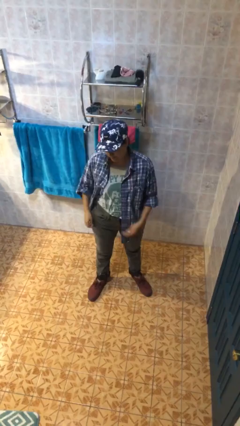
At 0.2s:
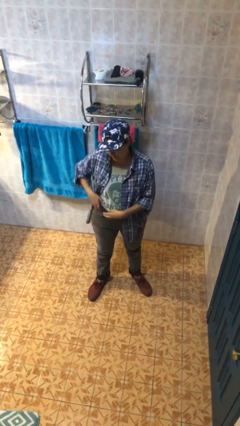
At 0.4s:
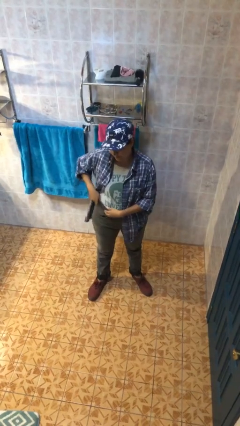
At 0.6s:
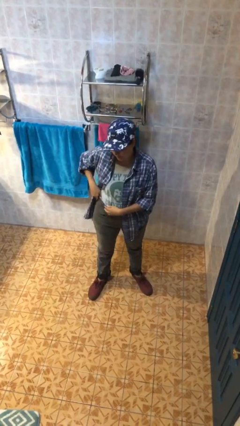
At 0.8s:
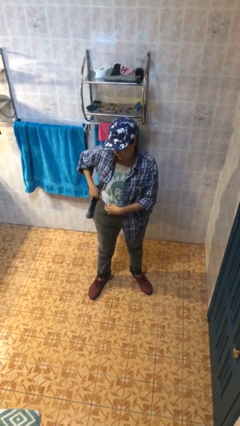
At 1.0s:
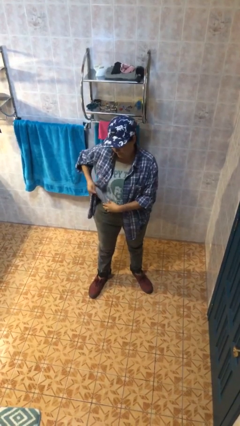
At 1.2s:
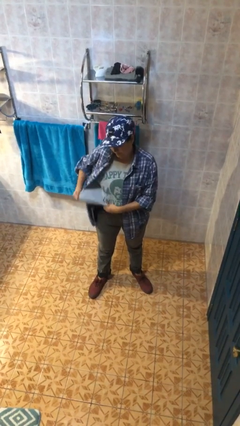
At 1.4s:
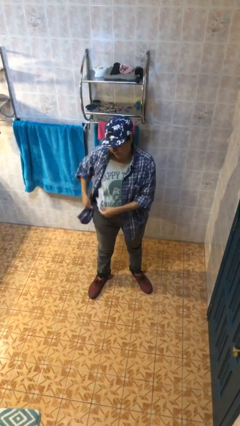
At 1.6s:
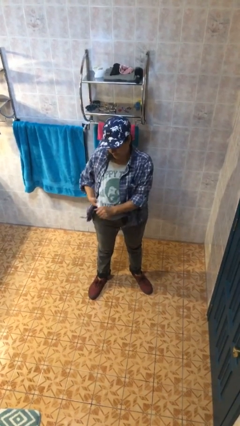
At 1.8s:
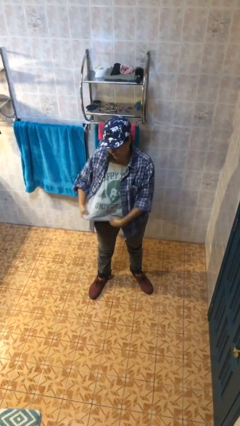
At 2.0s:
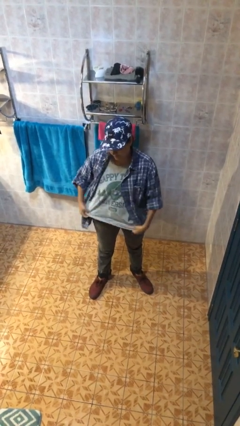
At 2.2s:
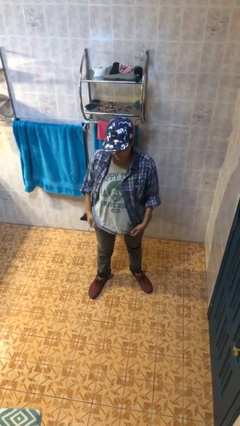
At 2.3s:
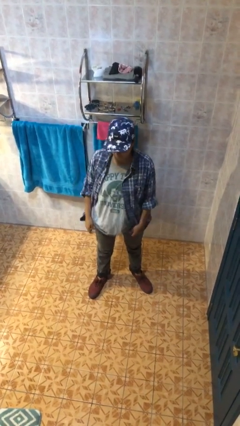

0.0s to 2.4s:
person untucks shirt

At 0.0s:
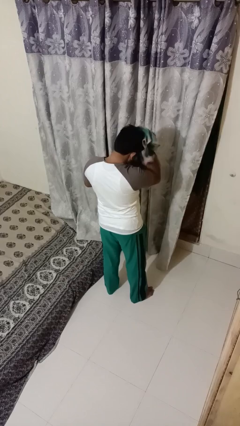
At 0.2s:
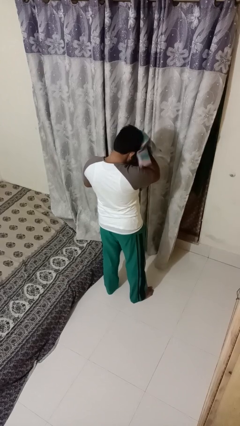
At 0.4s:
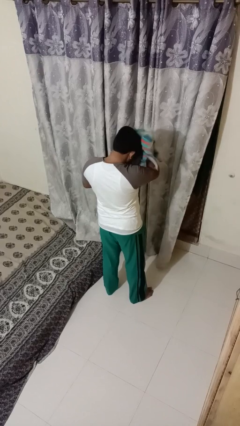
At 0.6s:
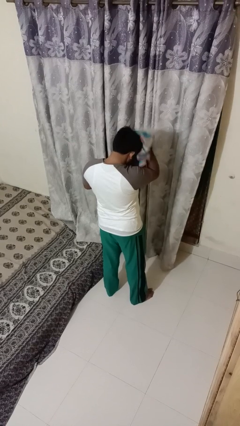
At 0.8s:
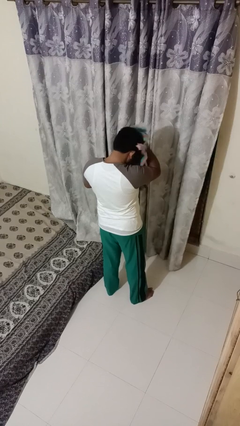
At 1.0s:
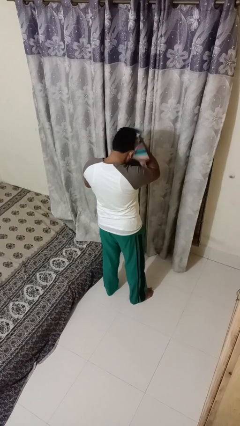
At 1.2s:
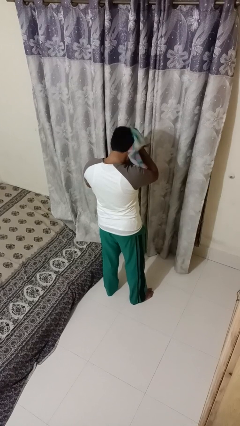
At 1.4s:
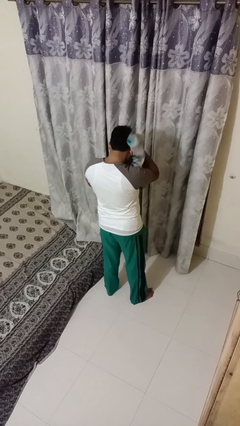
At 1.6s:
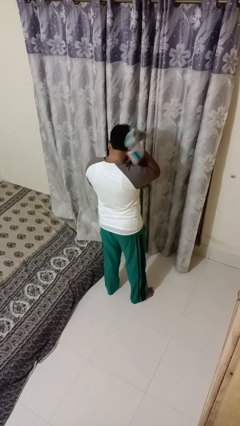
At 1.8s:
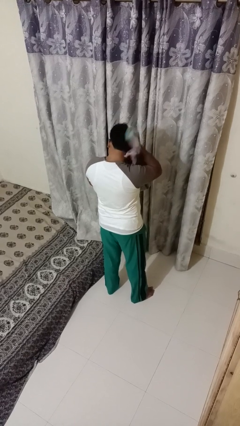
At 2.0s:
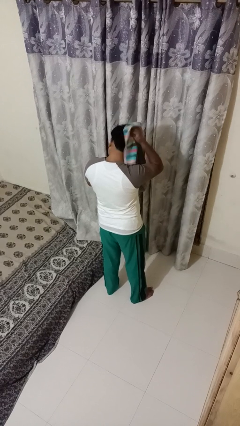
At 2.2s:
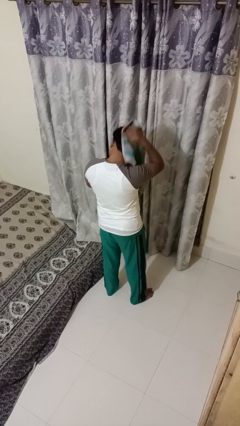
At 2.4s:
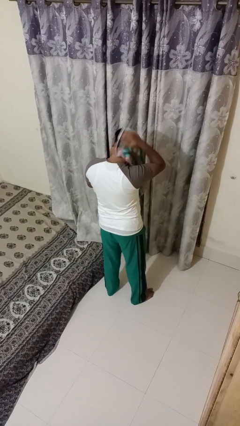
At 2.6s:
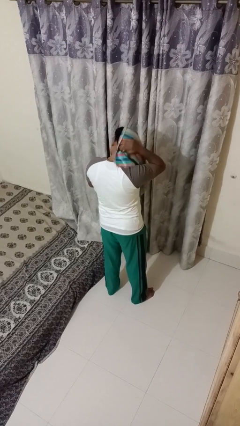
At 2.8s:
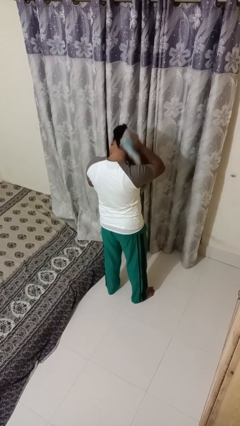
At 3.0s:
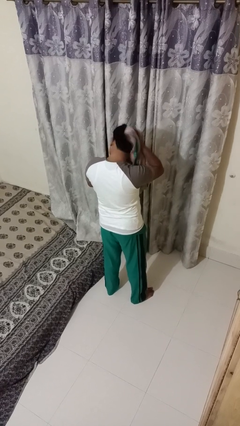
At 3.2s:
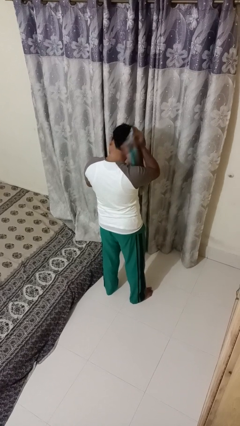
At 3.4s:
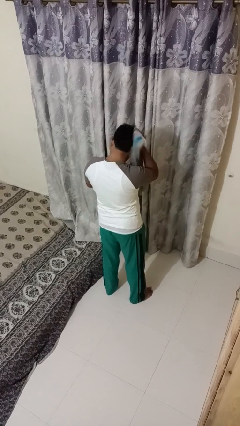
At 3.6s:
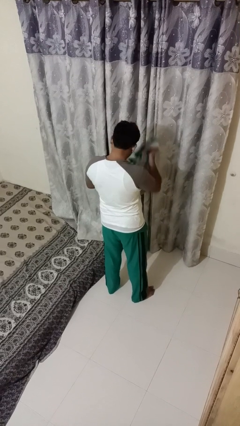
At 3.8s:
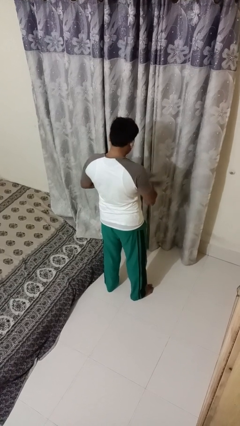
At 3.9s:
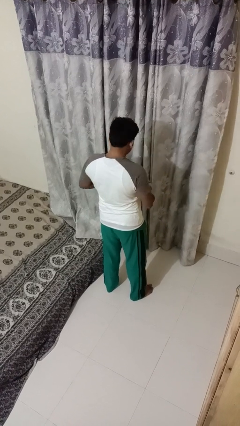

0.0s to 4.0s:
person dries hair with towel

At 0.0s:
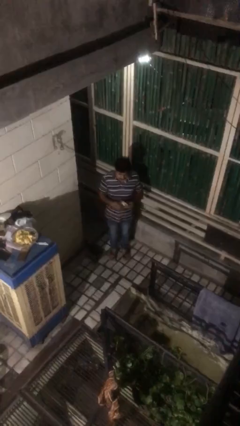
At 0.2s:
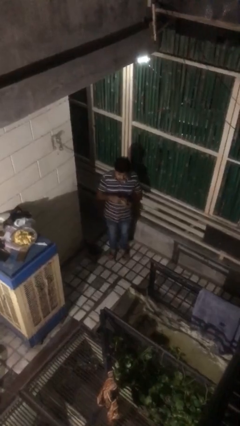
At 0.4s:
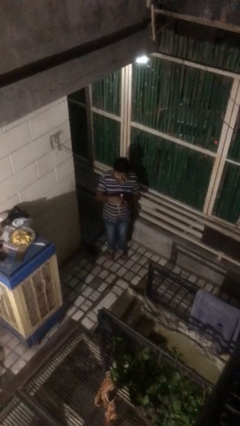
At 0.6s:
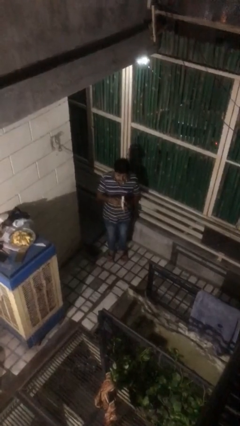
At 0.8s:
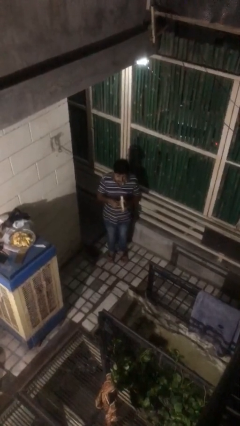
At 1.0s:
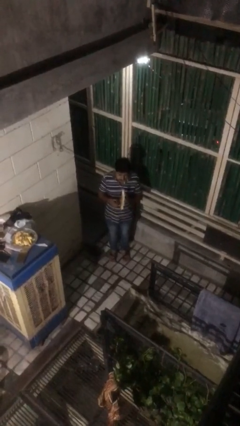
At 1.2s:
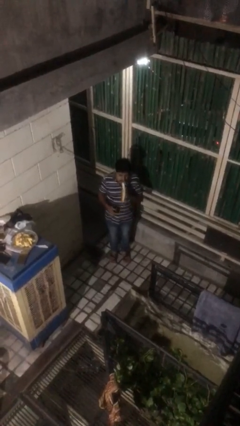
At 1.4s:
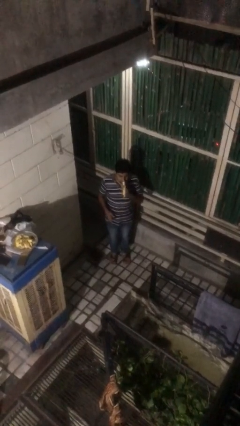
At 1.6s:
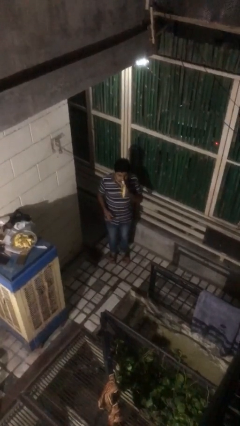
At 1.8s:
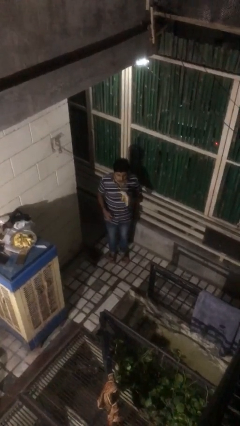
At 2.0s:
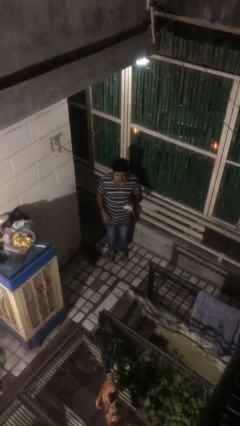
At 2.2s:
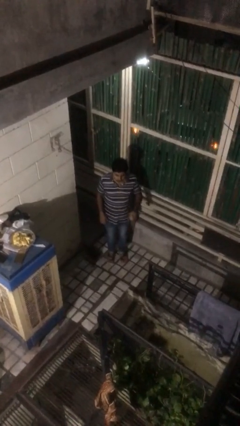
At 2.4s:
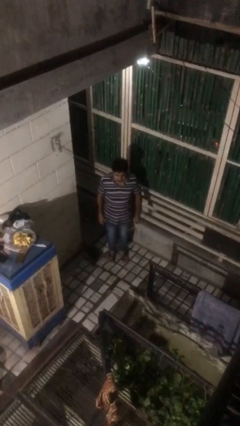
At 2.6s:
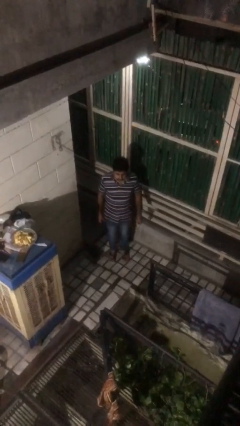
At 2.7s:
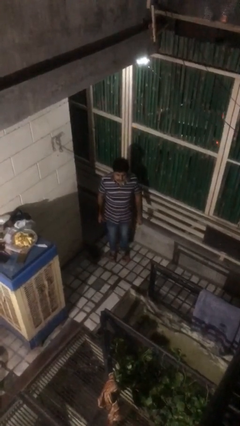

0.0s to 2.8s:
person eats banana

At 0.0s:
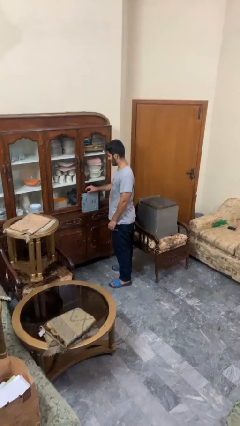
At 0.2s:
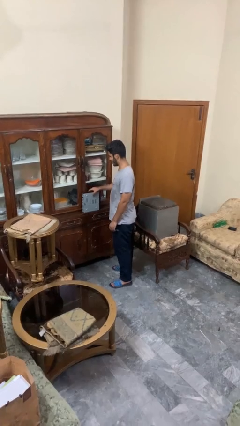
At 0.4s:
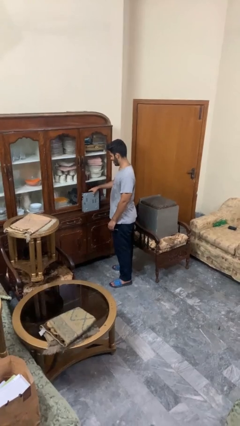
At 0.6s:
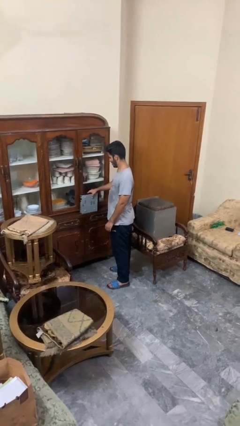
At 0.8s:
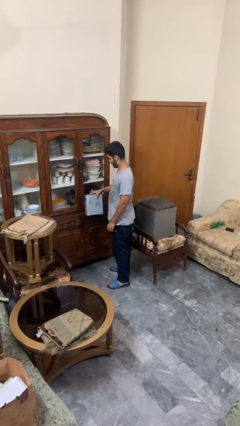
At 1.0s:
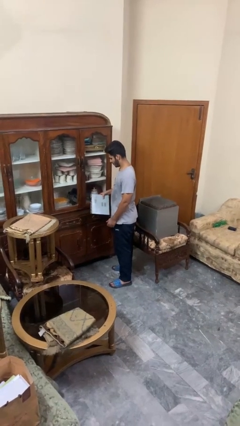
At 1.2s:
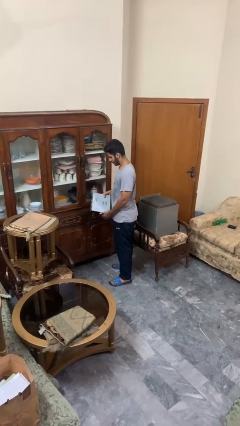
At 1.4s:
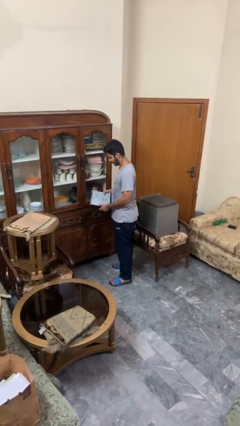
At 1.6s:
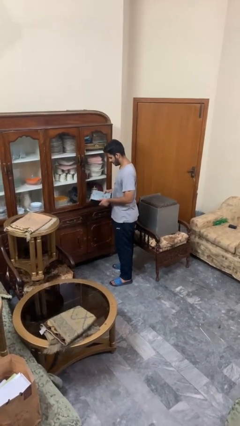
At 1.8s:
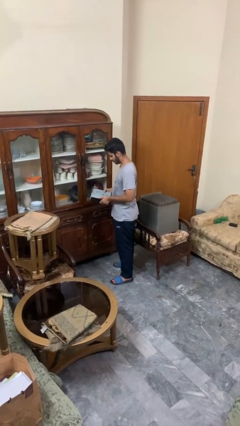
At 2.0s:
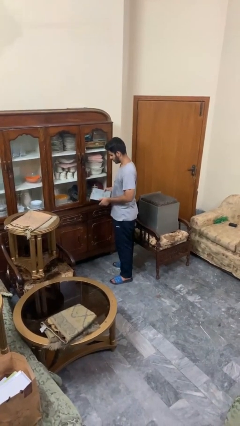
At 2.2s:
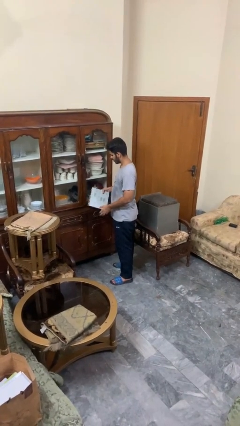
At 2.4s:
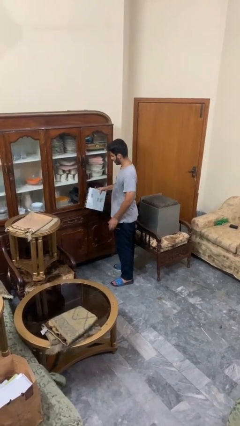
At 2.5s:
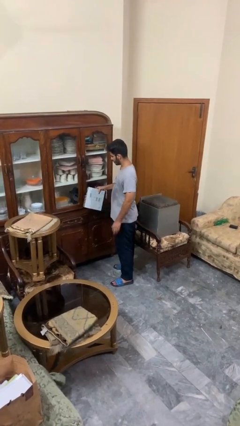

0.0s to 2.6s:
person picks up object from countertop

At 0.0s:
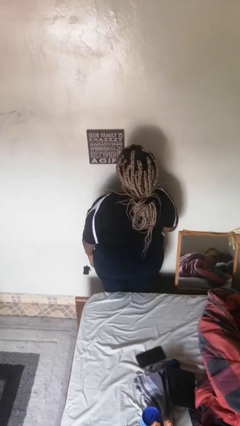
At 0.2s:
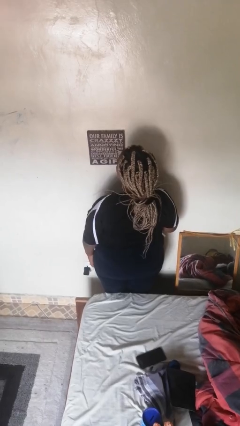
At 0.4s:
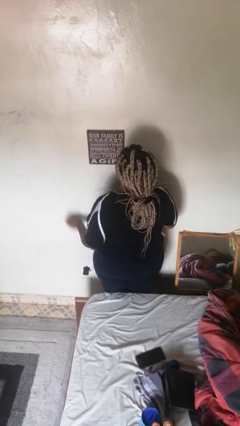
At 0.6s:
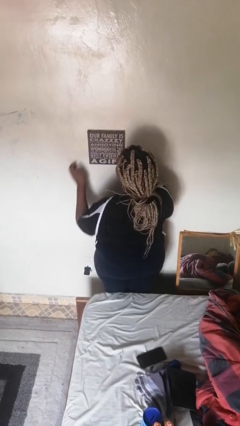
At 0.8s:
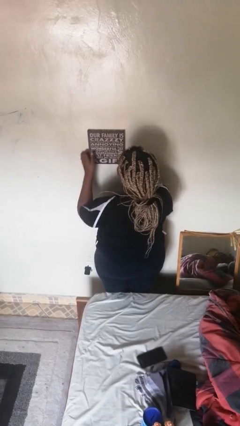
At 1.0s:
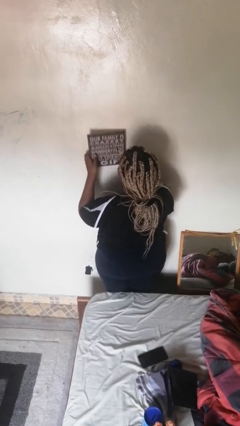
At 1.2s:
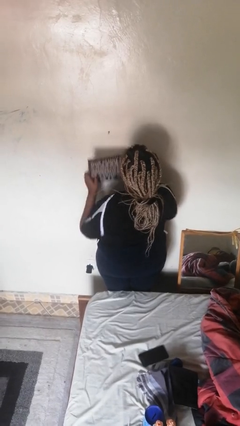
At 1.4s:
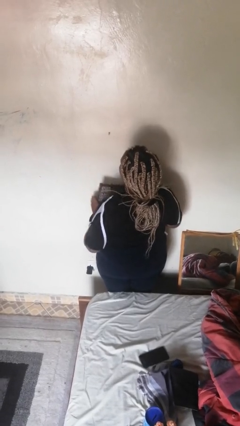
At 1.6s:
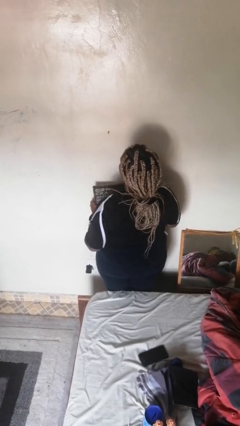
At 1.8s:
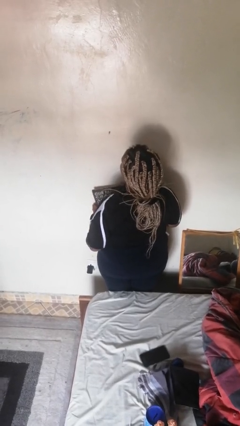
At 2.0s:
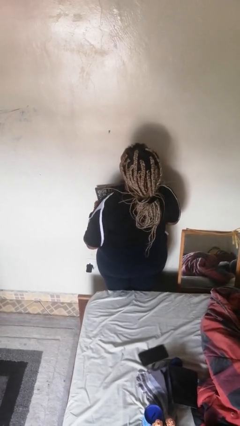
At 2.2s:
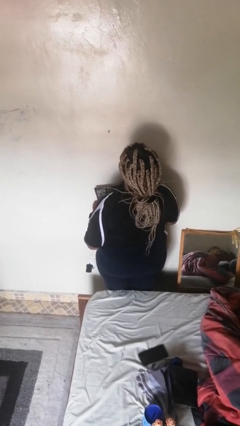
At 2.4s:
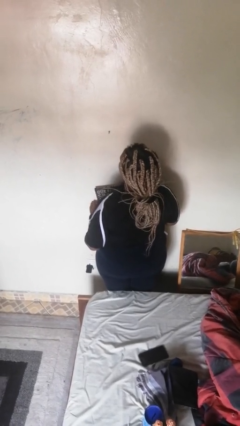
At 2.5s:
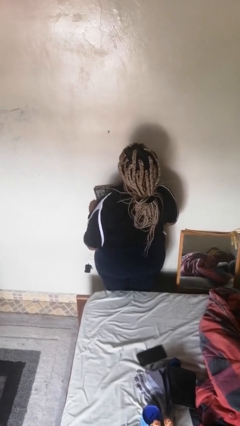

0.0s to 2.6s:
person takes down picture frame

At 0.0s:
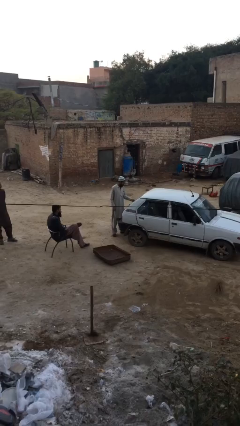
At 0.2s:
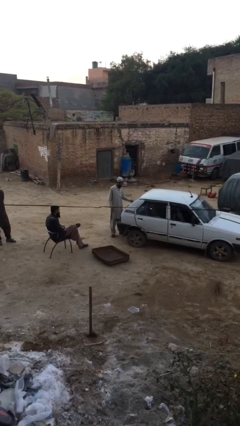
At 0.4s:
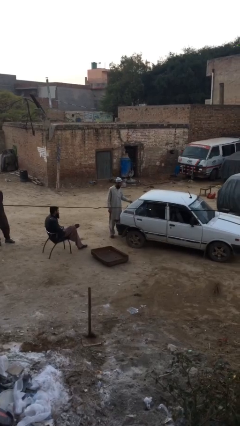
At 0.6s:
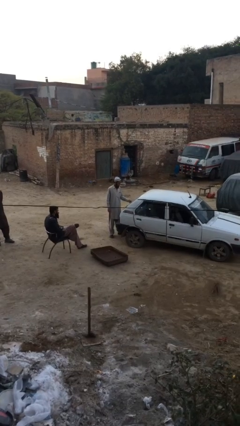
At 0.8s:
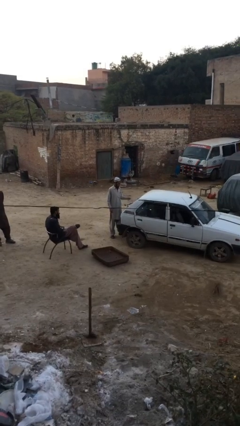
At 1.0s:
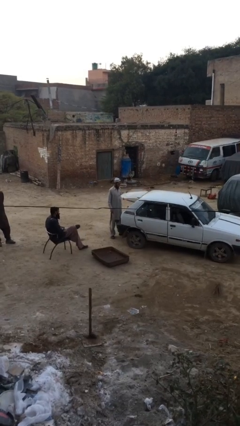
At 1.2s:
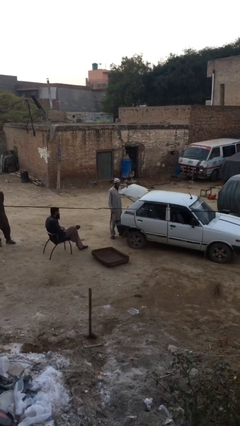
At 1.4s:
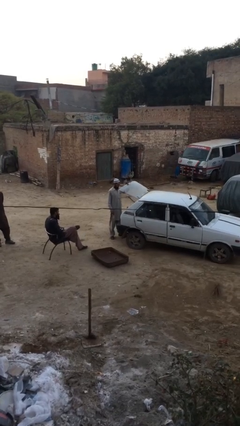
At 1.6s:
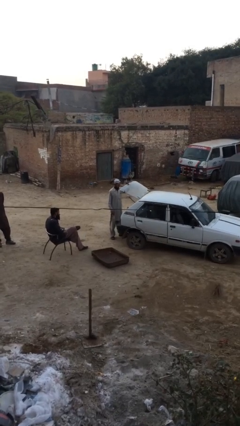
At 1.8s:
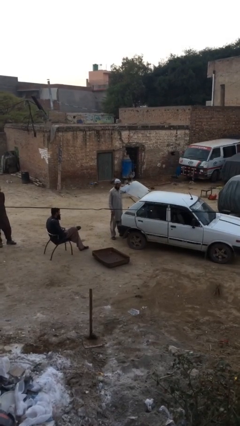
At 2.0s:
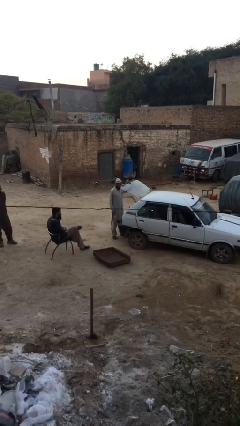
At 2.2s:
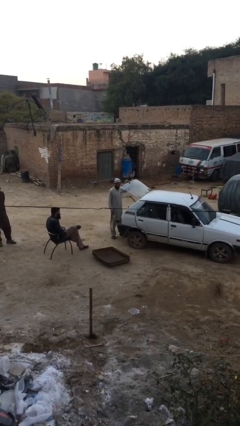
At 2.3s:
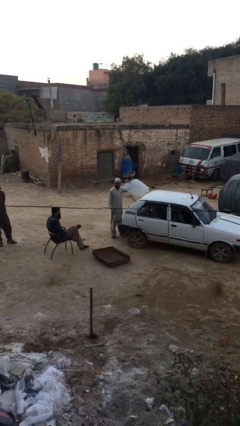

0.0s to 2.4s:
person opens car trunk

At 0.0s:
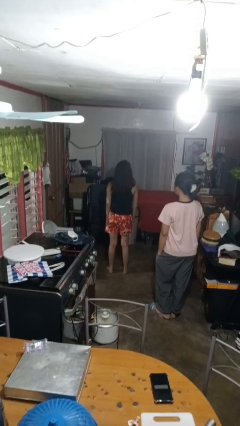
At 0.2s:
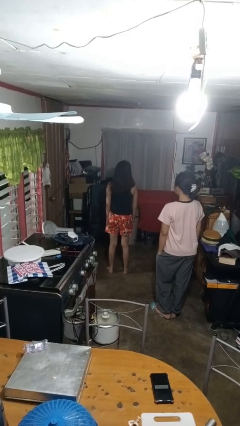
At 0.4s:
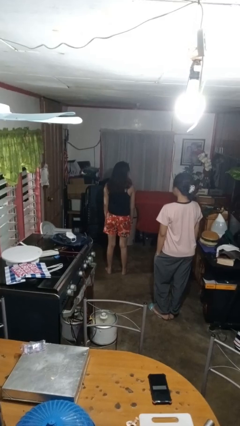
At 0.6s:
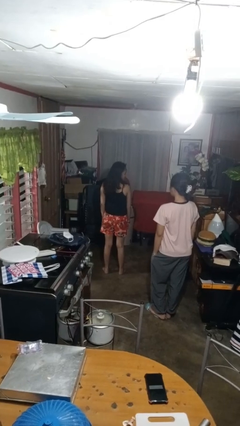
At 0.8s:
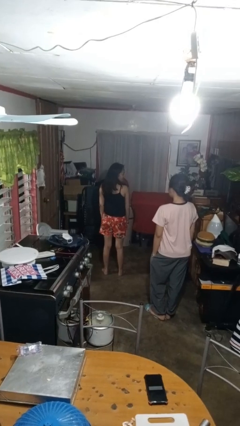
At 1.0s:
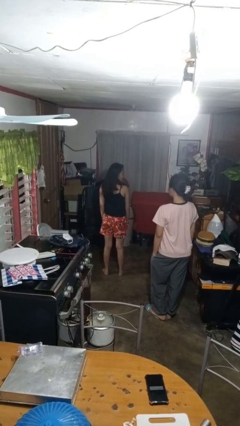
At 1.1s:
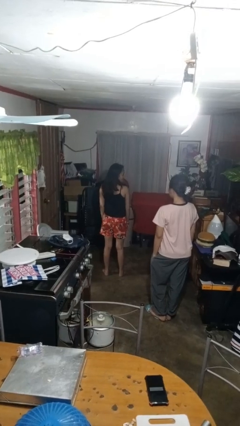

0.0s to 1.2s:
person looks over shoulder
